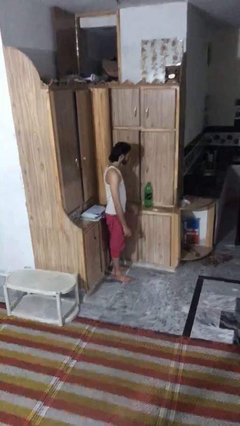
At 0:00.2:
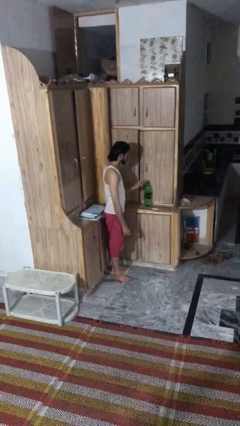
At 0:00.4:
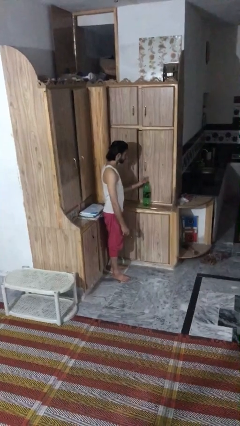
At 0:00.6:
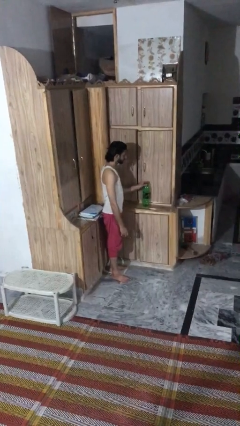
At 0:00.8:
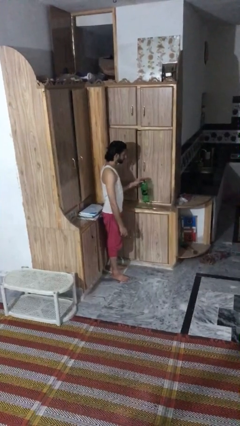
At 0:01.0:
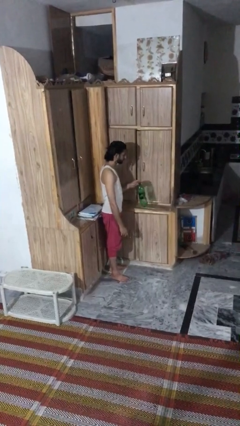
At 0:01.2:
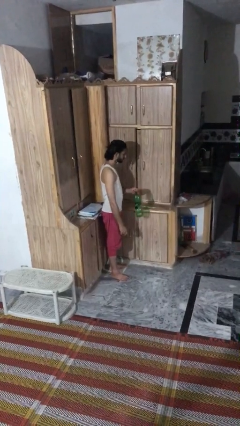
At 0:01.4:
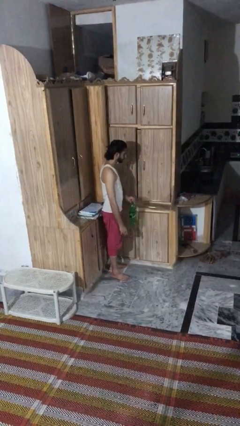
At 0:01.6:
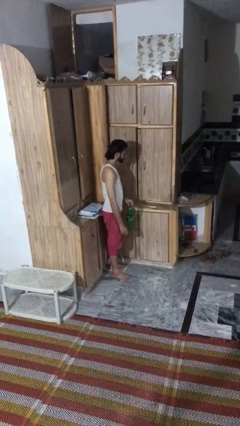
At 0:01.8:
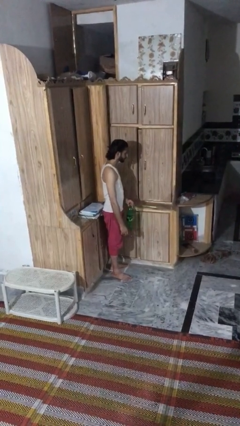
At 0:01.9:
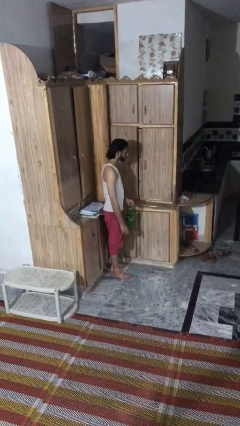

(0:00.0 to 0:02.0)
person picks up object from countertop

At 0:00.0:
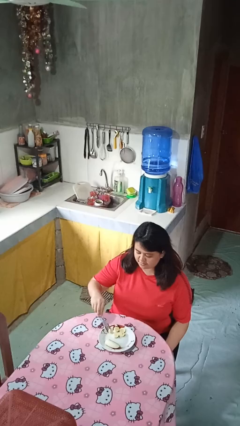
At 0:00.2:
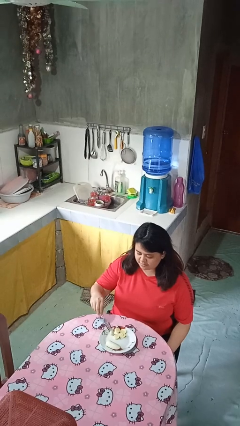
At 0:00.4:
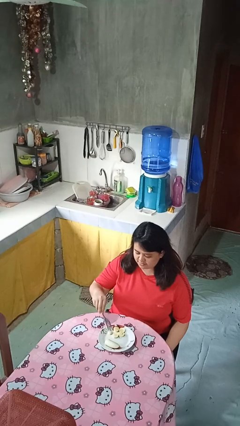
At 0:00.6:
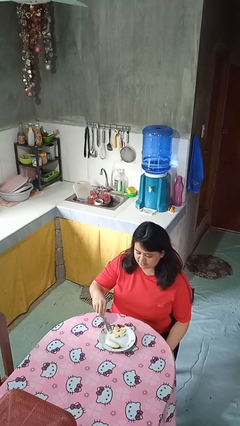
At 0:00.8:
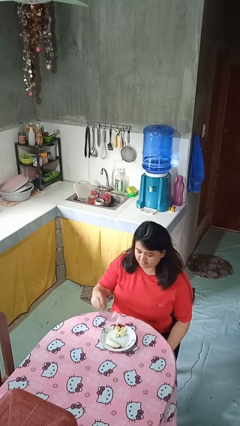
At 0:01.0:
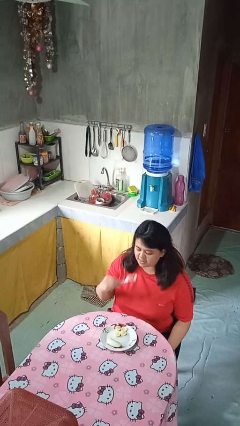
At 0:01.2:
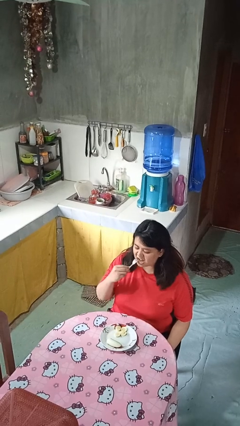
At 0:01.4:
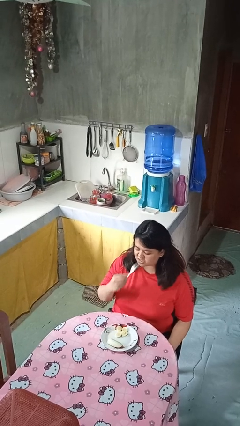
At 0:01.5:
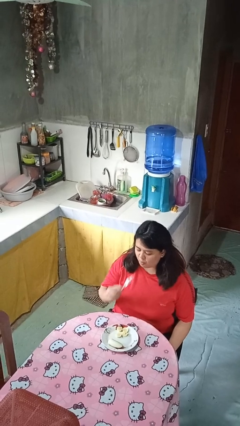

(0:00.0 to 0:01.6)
person eats with utensil

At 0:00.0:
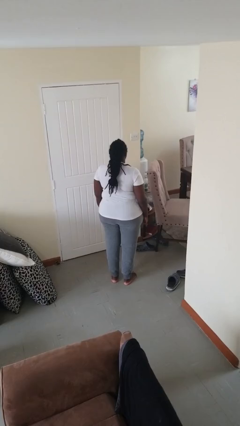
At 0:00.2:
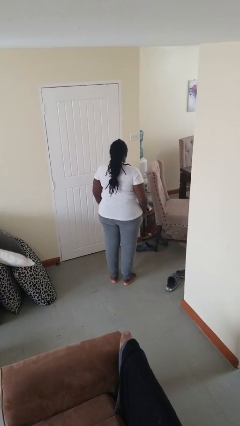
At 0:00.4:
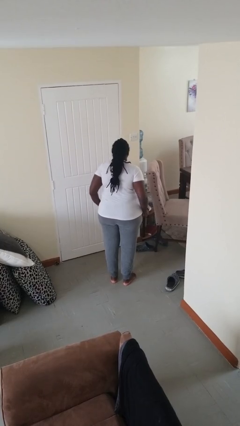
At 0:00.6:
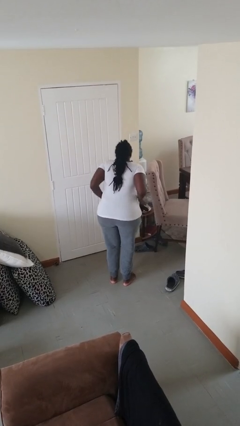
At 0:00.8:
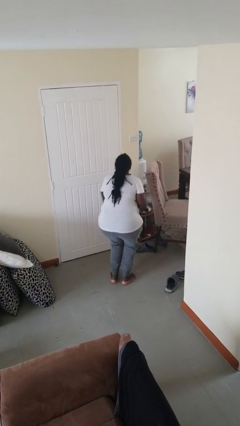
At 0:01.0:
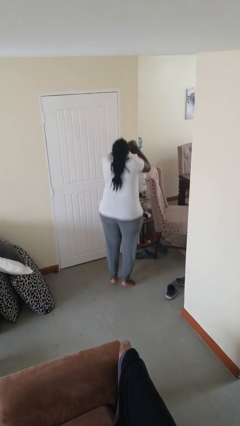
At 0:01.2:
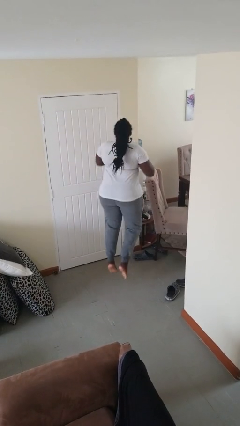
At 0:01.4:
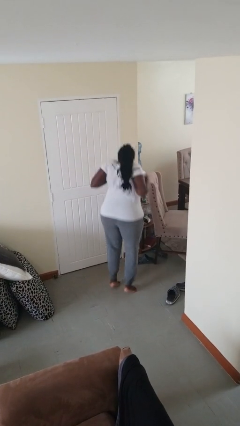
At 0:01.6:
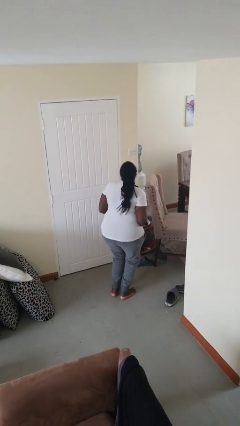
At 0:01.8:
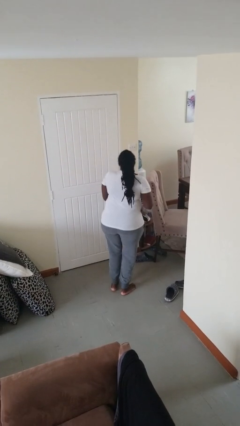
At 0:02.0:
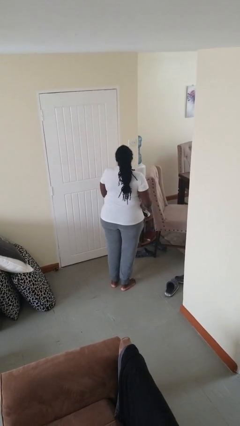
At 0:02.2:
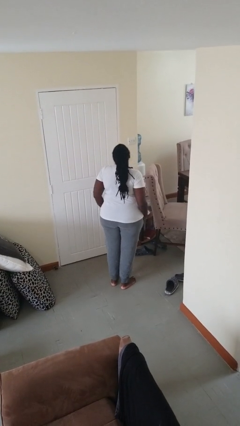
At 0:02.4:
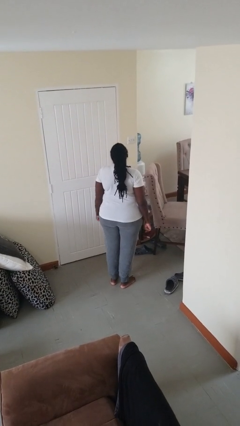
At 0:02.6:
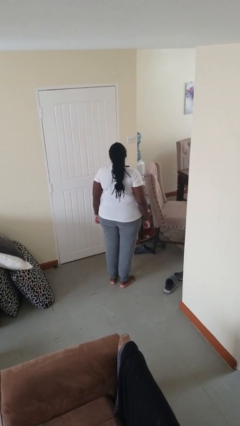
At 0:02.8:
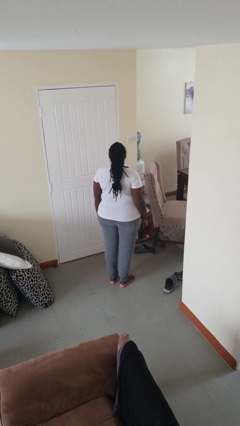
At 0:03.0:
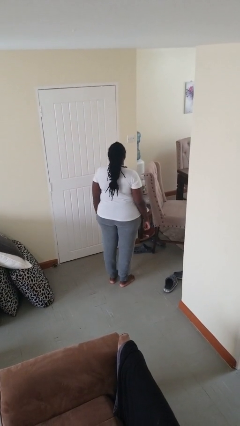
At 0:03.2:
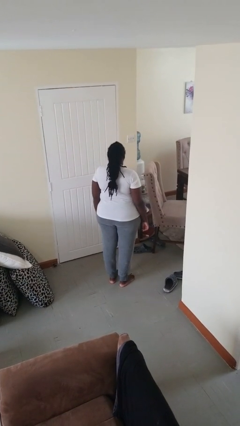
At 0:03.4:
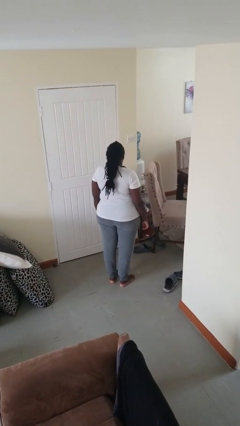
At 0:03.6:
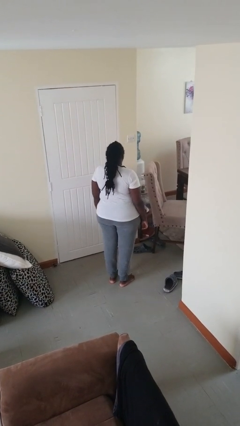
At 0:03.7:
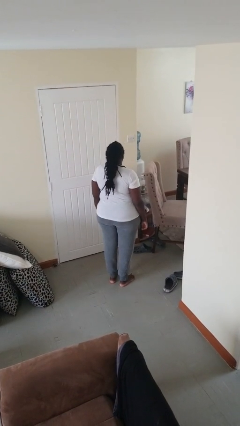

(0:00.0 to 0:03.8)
person jumps

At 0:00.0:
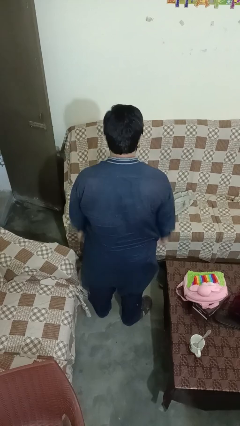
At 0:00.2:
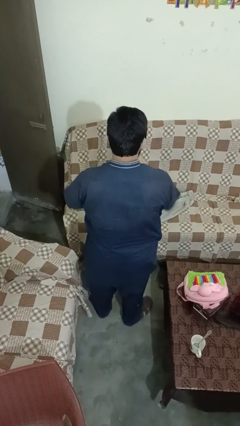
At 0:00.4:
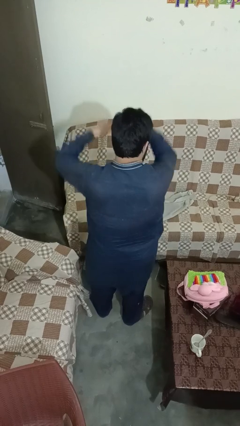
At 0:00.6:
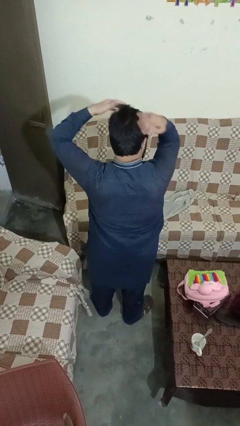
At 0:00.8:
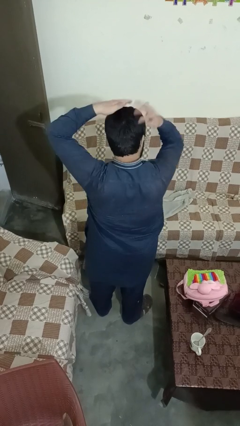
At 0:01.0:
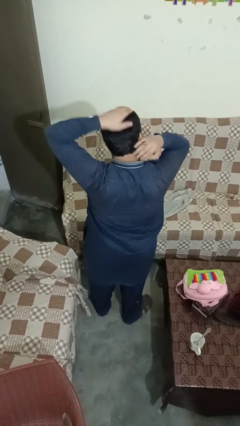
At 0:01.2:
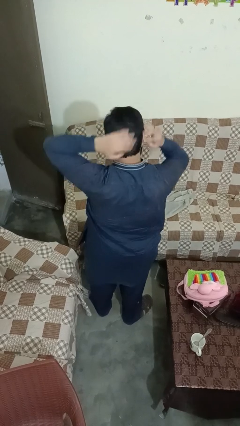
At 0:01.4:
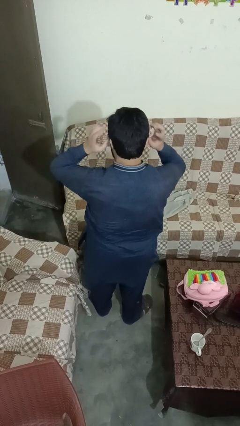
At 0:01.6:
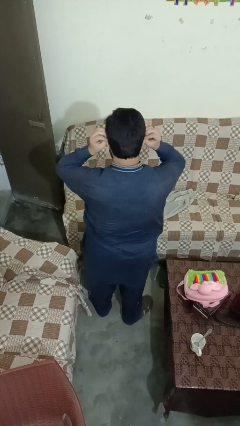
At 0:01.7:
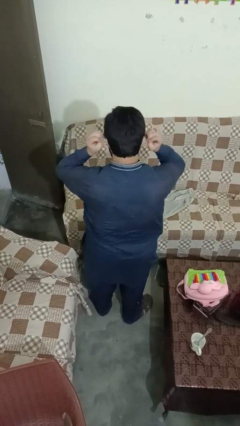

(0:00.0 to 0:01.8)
person strokes hair

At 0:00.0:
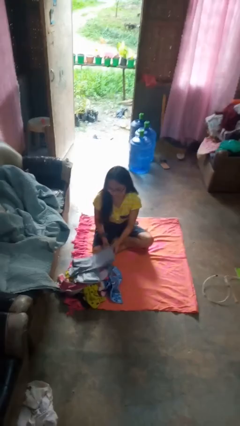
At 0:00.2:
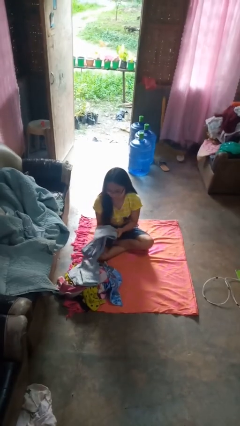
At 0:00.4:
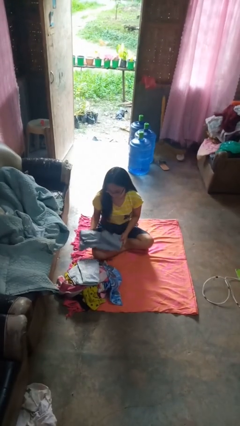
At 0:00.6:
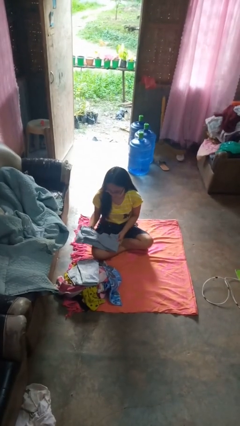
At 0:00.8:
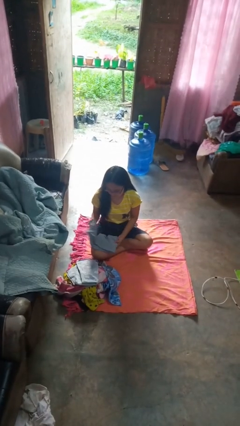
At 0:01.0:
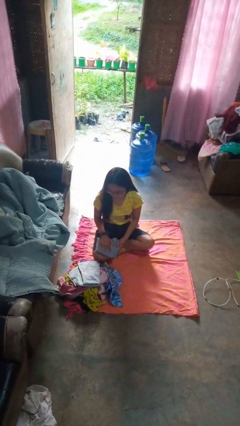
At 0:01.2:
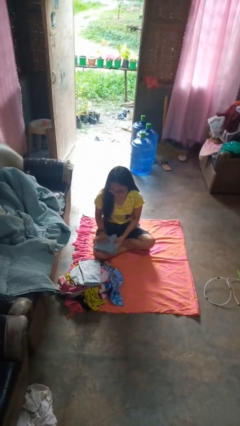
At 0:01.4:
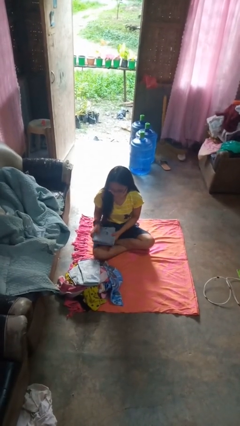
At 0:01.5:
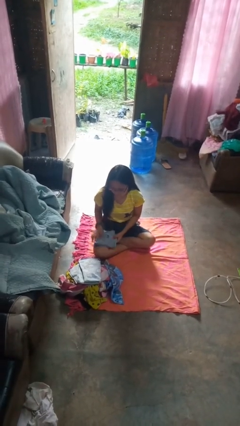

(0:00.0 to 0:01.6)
person folds shirt

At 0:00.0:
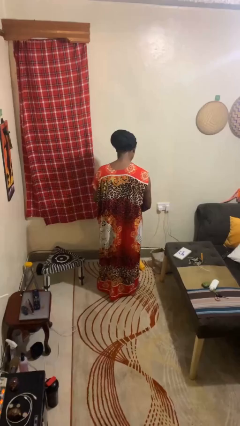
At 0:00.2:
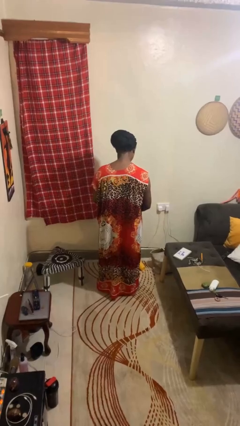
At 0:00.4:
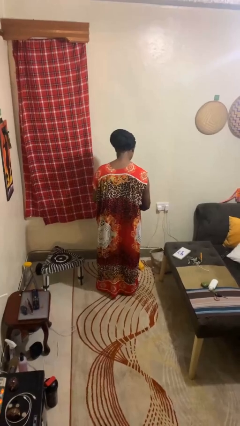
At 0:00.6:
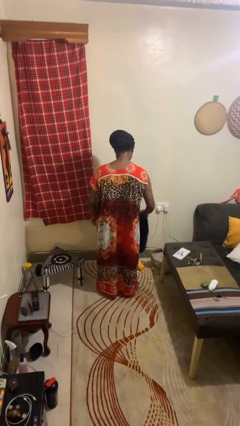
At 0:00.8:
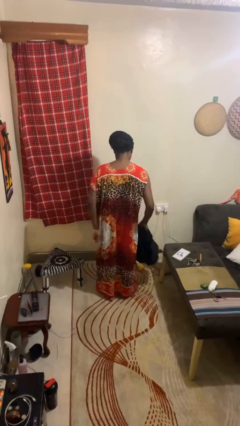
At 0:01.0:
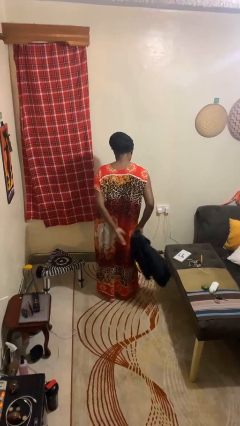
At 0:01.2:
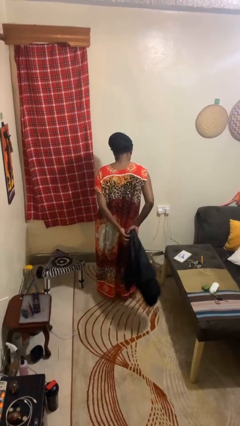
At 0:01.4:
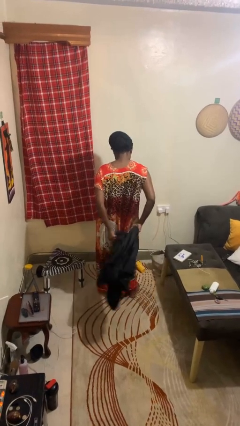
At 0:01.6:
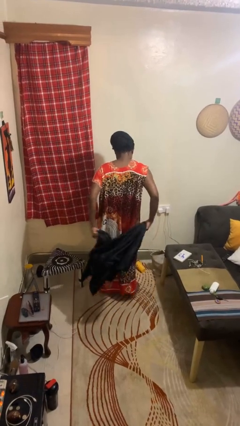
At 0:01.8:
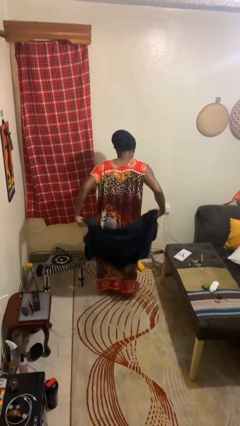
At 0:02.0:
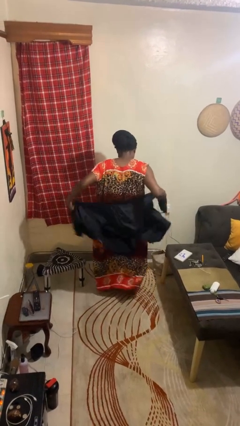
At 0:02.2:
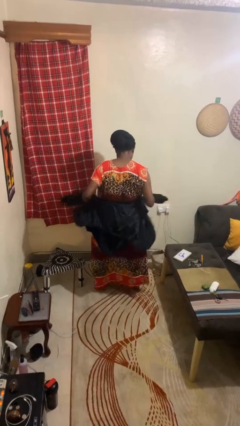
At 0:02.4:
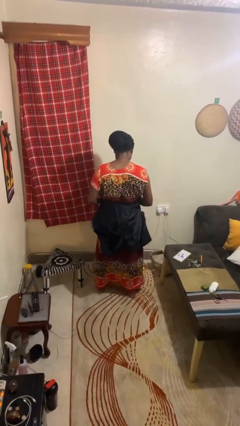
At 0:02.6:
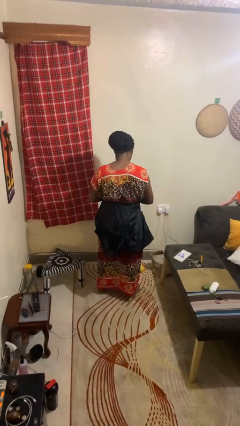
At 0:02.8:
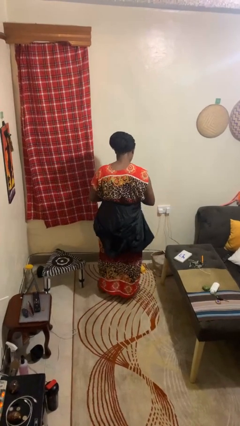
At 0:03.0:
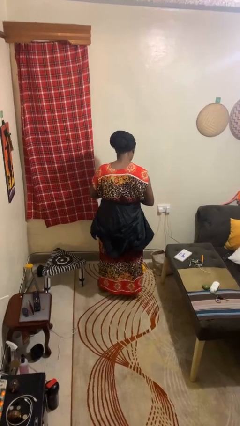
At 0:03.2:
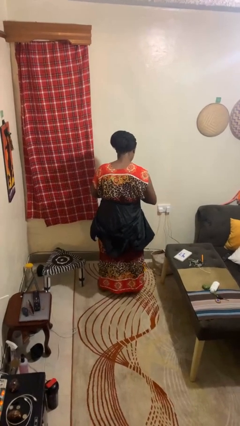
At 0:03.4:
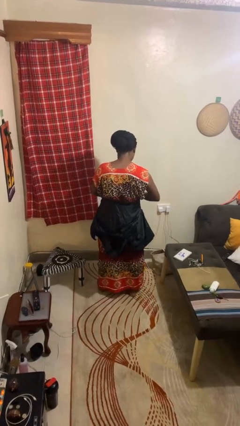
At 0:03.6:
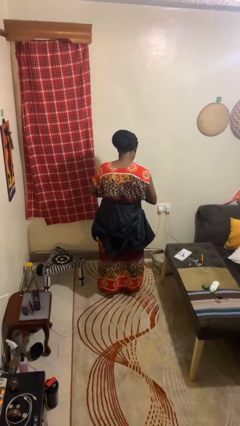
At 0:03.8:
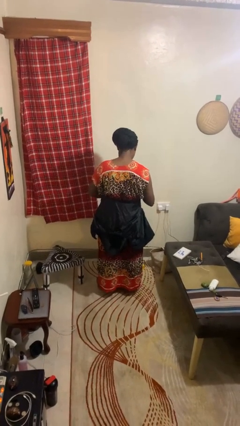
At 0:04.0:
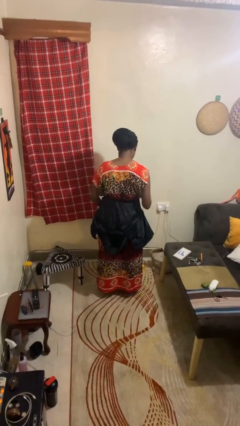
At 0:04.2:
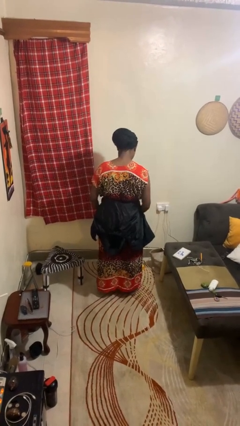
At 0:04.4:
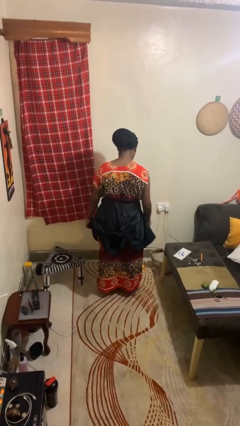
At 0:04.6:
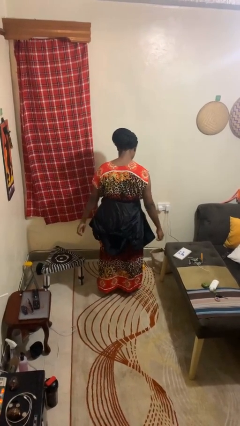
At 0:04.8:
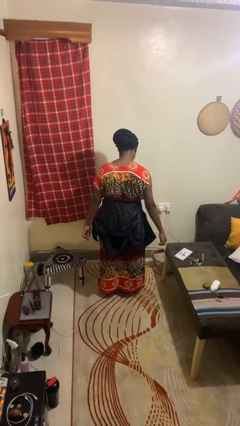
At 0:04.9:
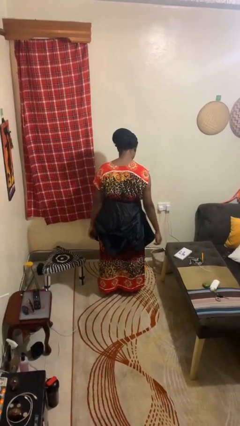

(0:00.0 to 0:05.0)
person ties jacket around waist

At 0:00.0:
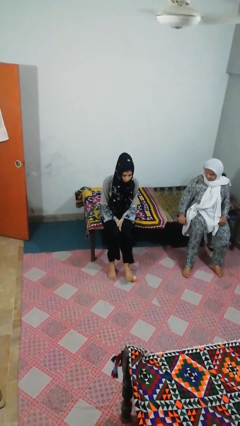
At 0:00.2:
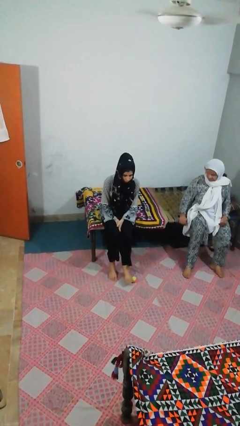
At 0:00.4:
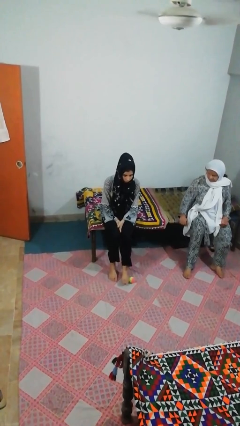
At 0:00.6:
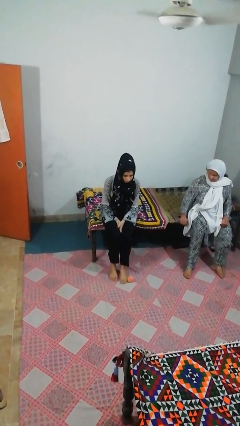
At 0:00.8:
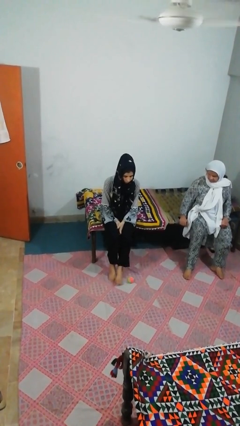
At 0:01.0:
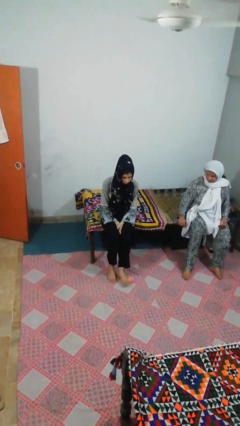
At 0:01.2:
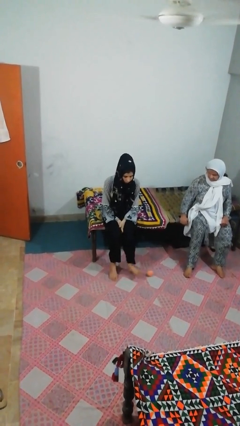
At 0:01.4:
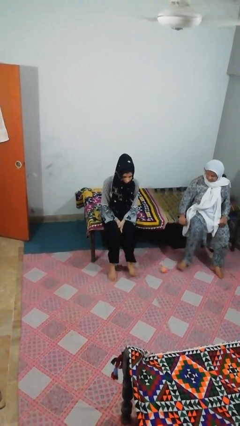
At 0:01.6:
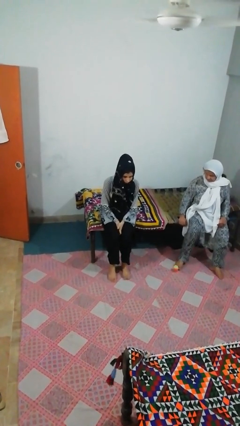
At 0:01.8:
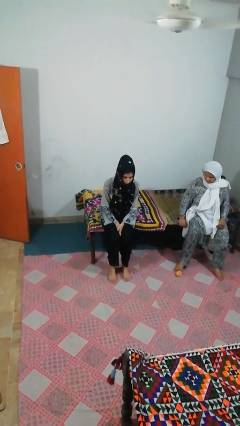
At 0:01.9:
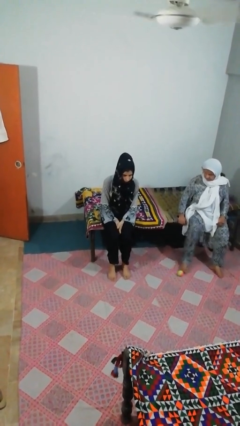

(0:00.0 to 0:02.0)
person kicks object to person
